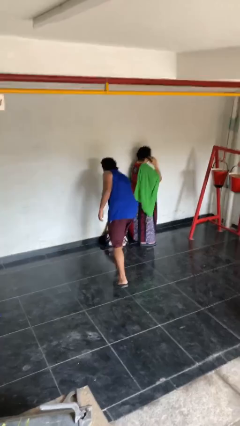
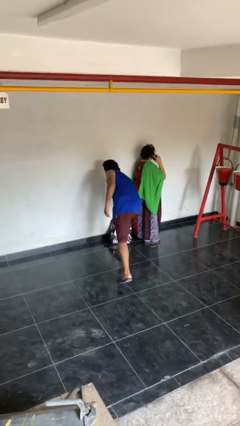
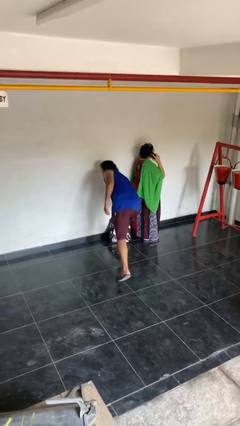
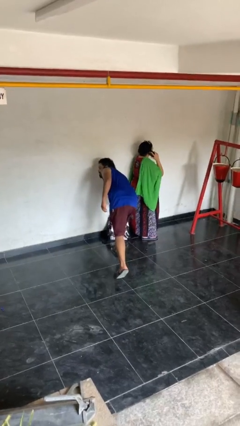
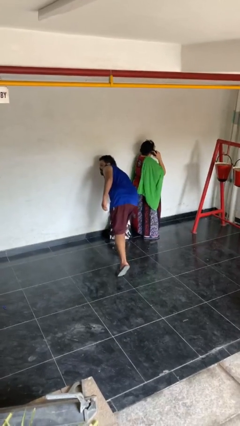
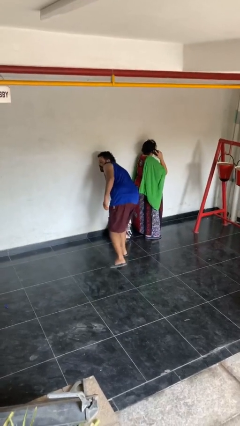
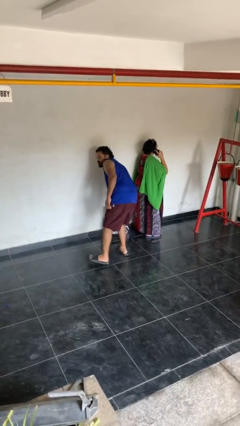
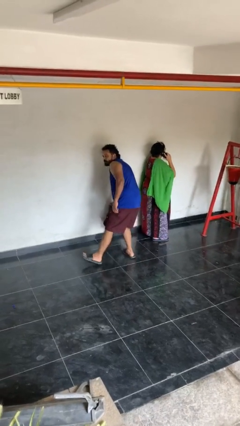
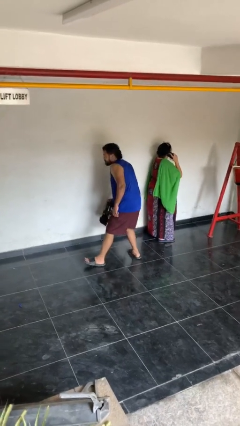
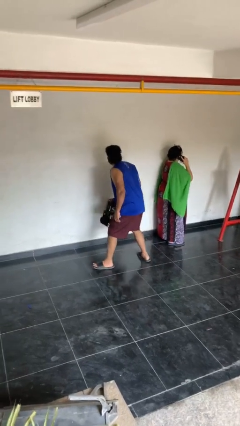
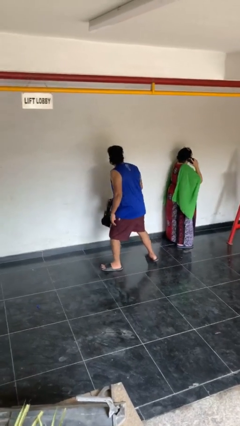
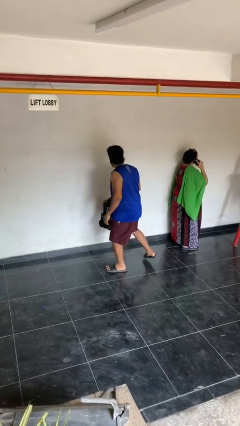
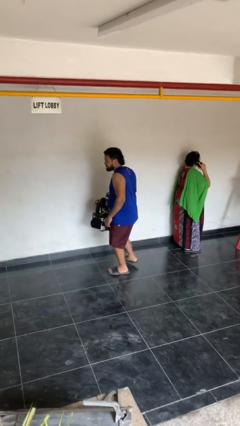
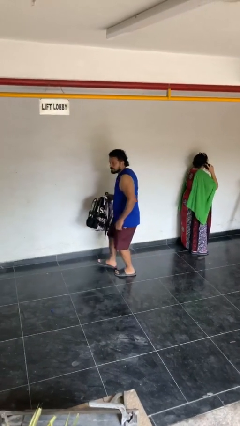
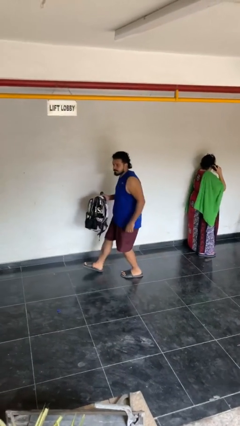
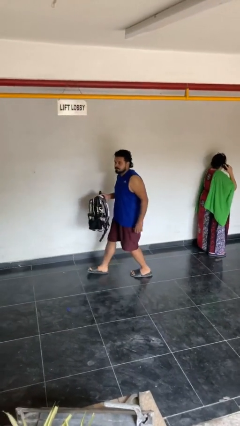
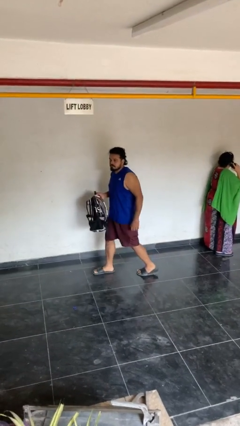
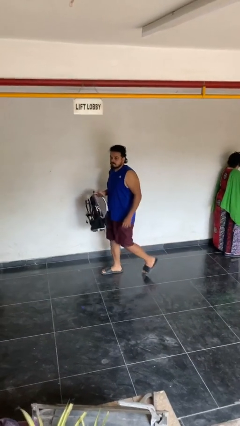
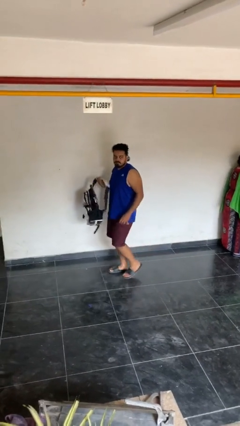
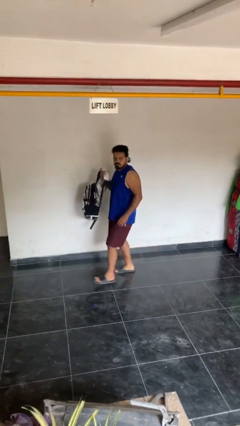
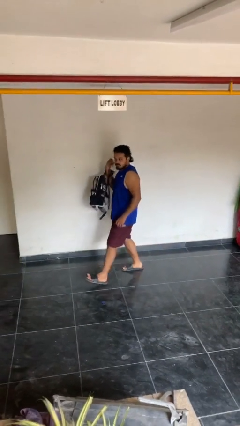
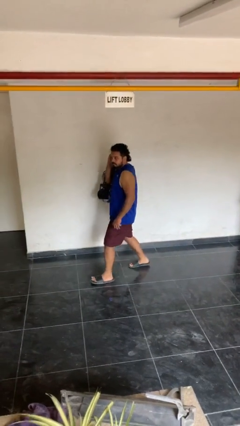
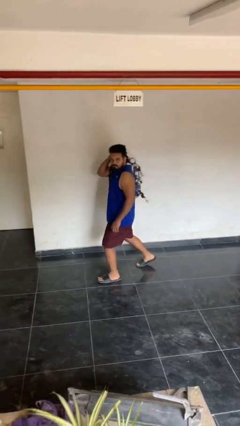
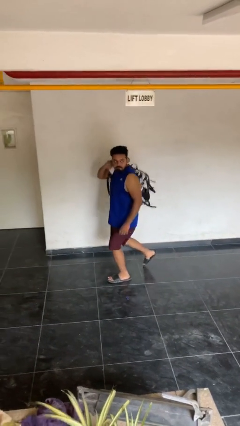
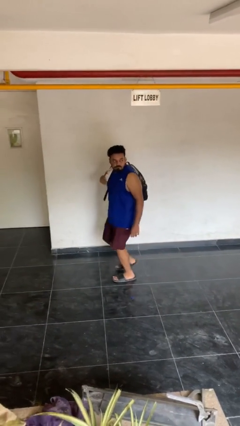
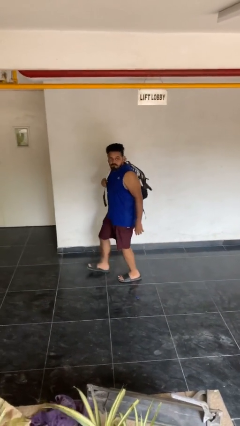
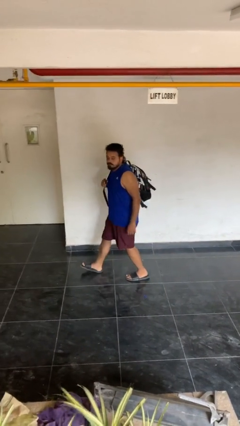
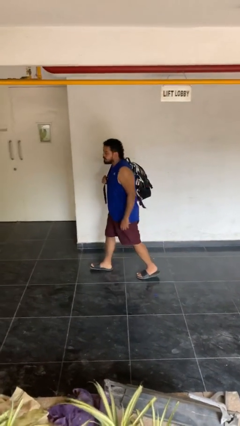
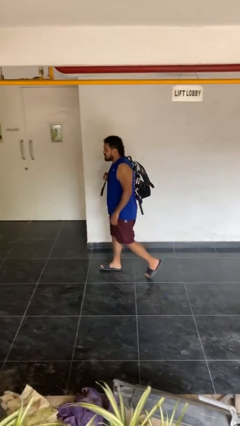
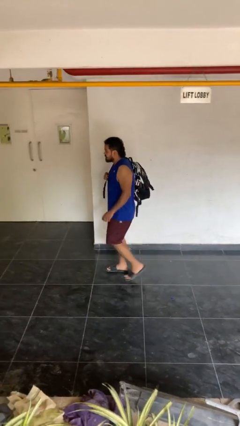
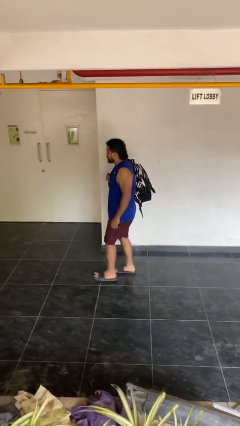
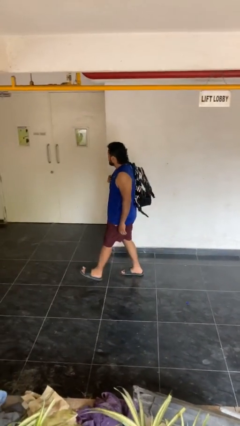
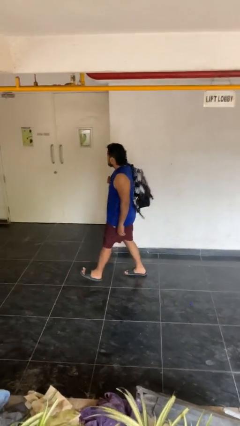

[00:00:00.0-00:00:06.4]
person steals object from person

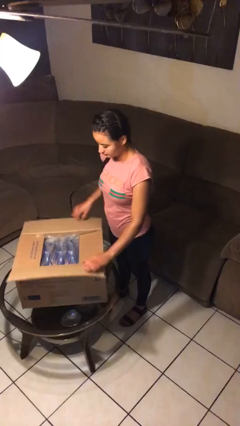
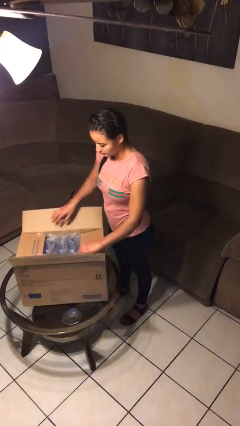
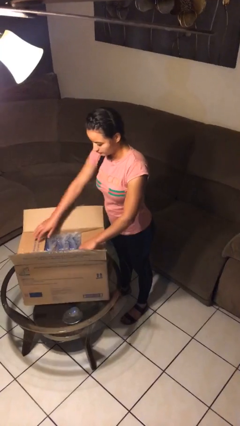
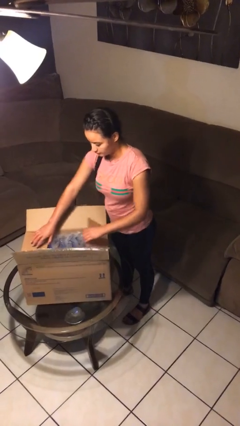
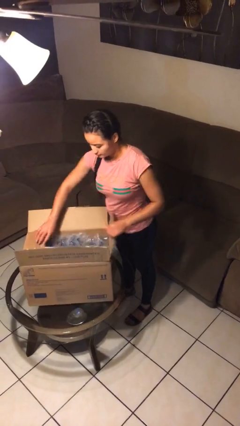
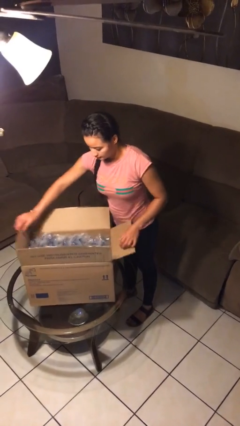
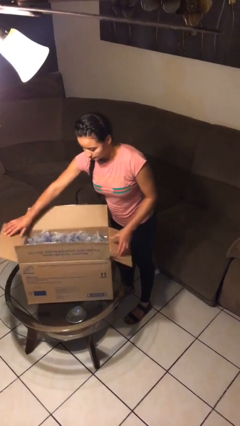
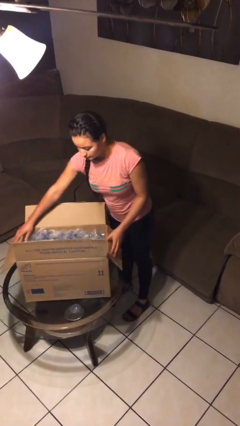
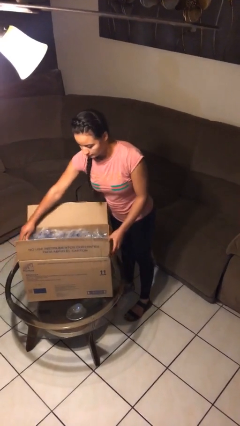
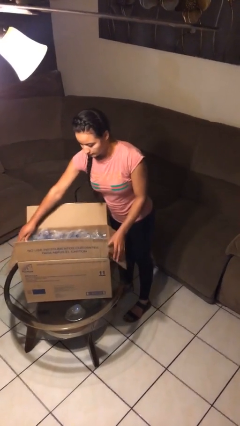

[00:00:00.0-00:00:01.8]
person opens box

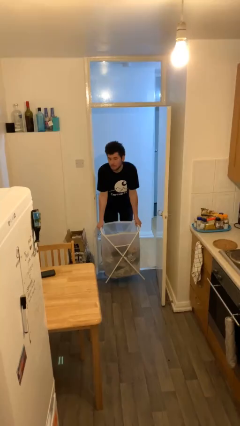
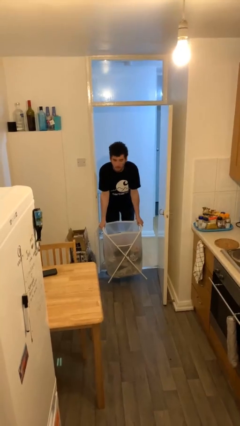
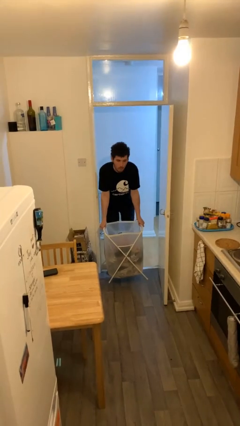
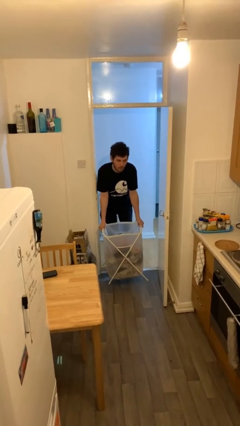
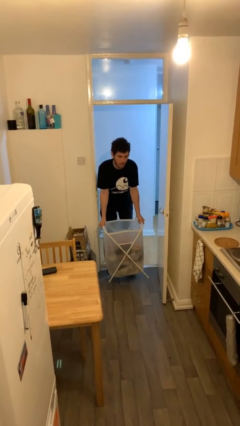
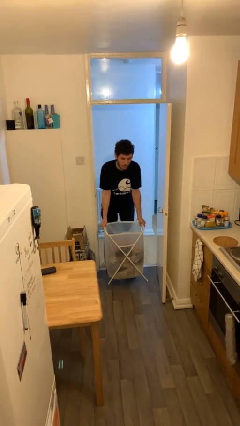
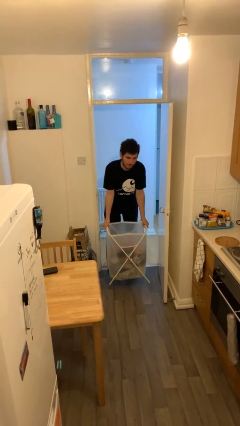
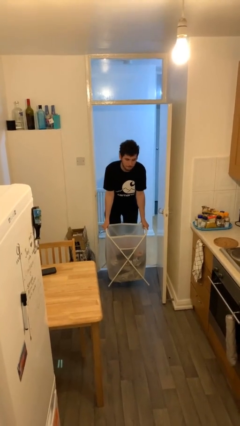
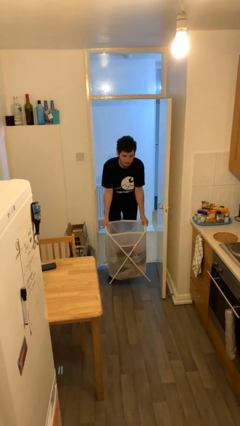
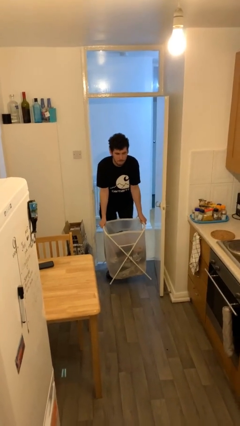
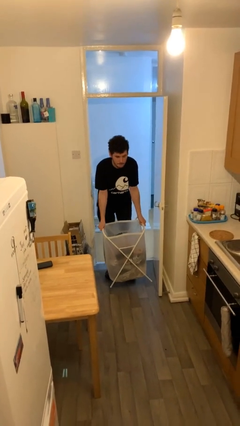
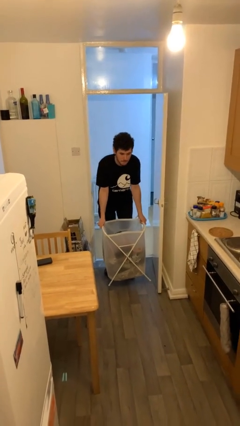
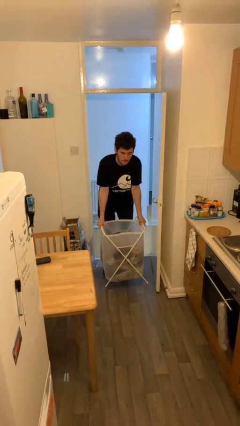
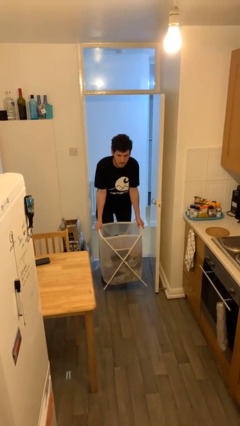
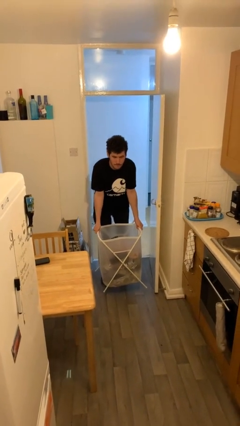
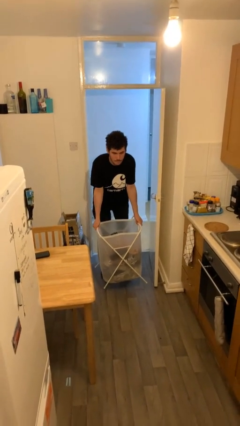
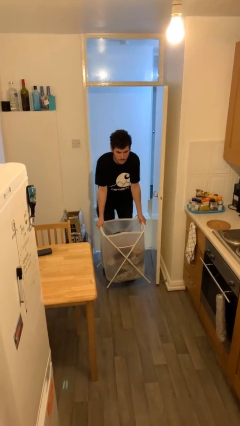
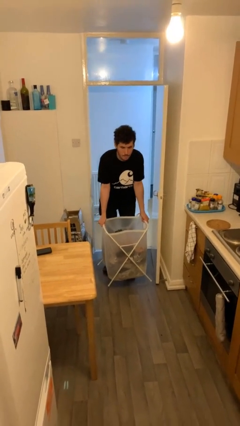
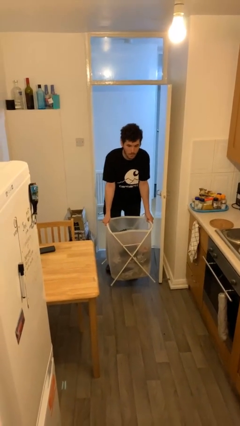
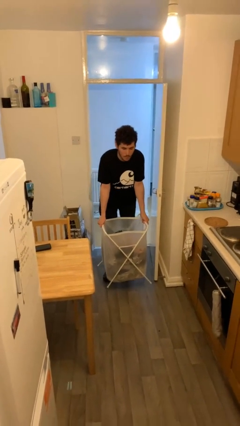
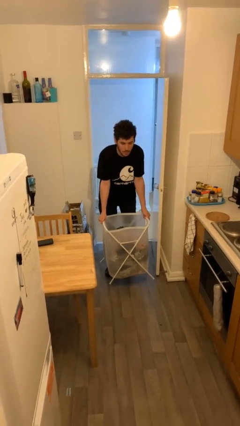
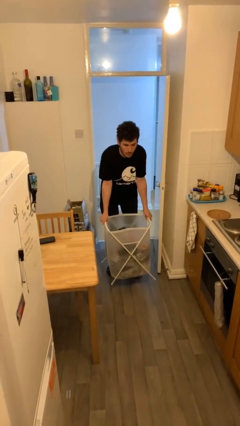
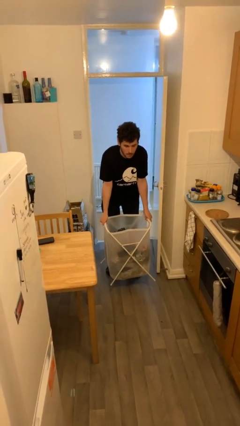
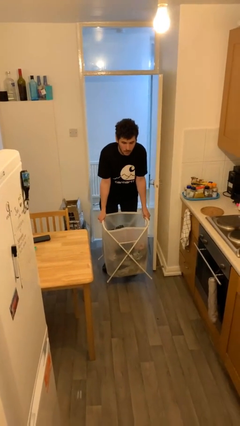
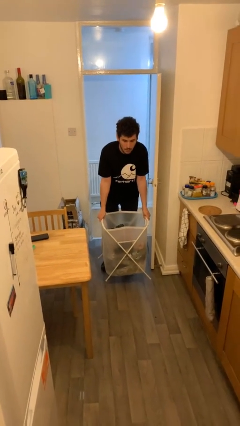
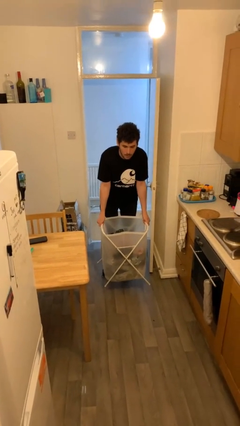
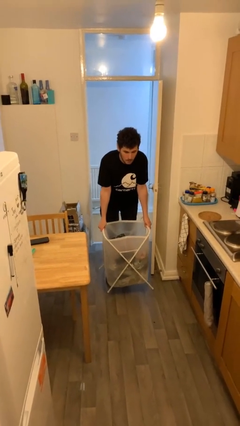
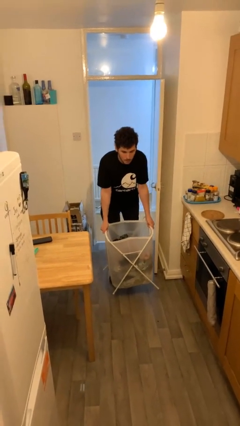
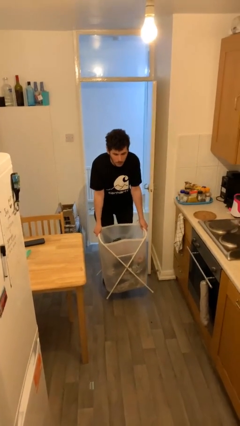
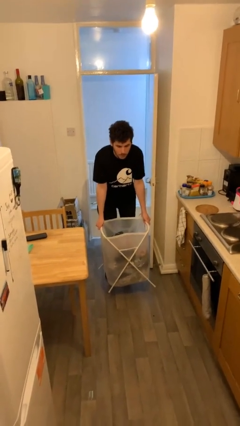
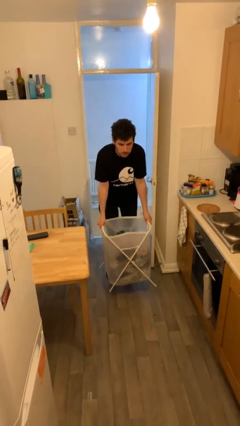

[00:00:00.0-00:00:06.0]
person carries heavy object

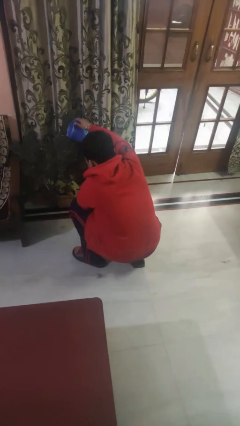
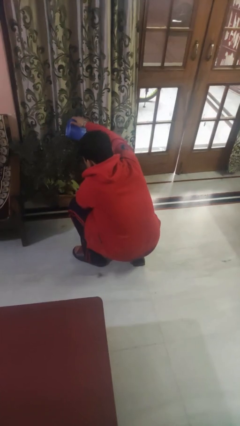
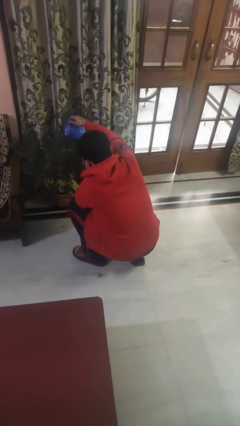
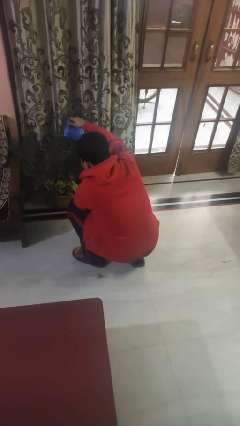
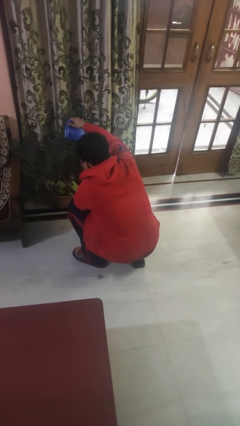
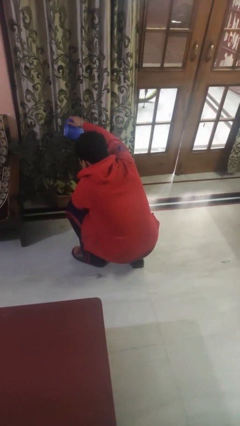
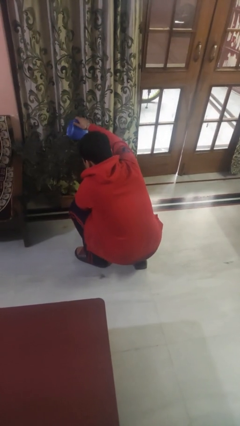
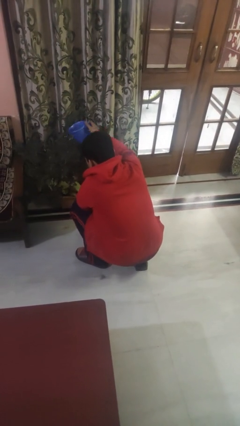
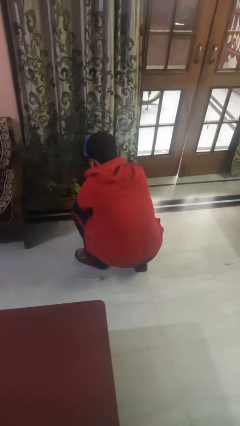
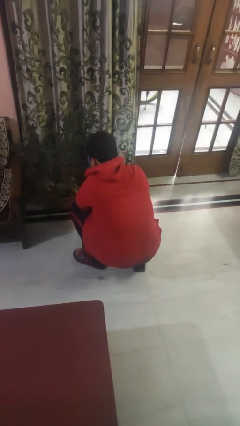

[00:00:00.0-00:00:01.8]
person waters houseplant

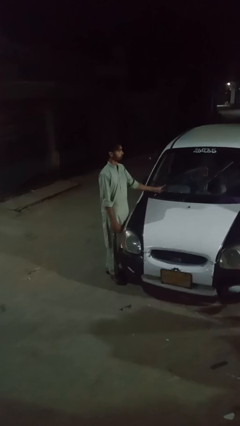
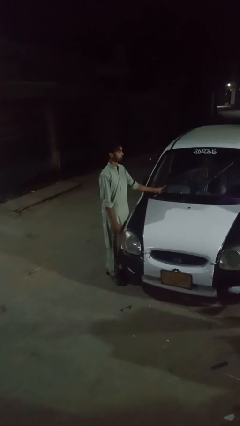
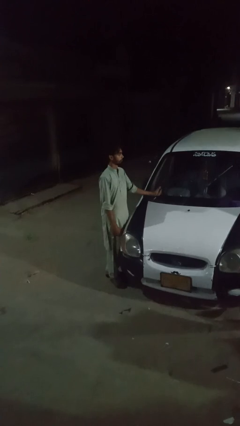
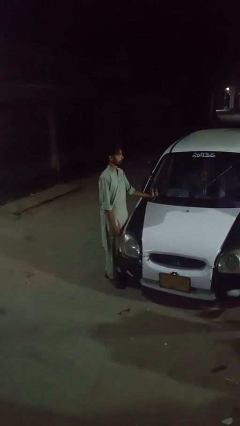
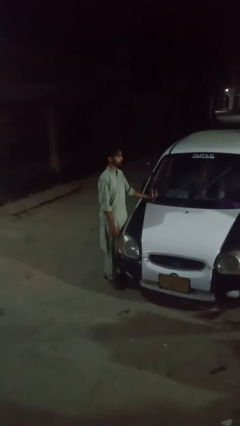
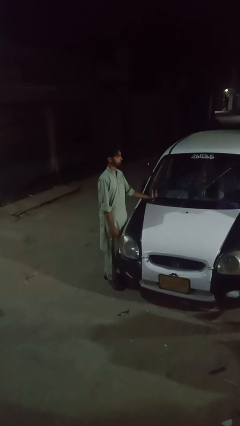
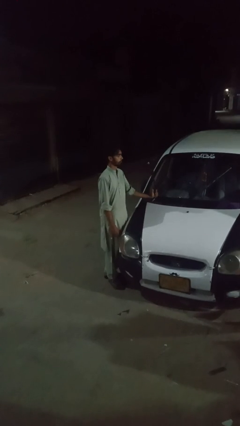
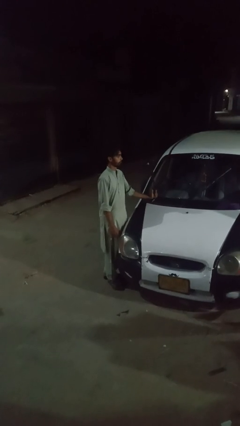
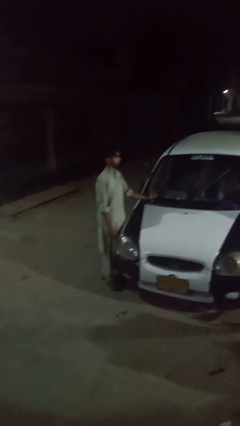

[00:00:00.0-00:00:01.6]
person flips up car wipers

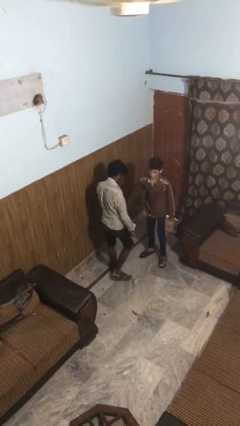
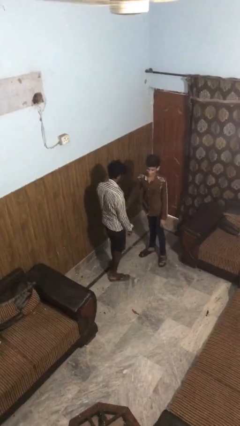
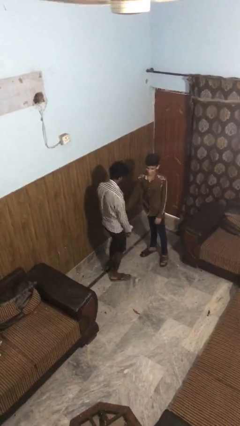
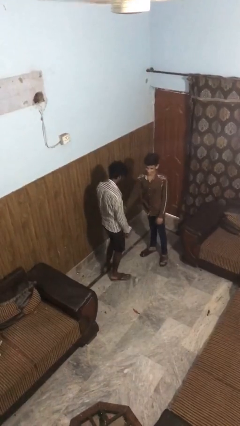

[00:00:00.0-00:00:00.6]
person carries person on shoulders
